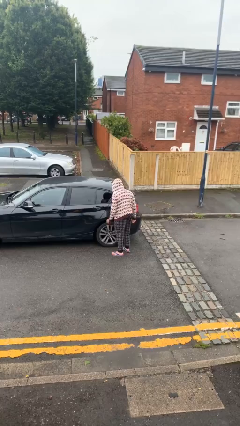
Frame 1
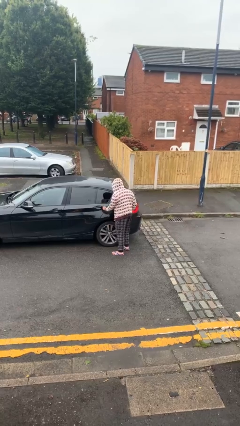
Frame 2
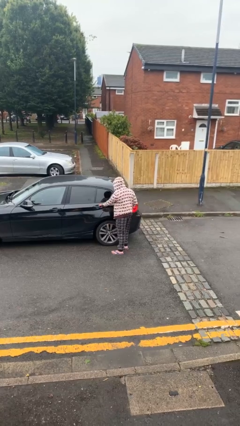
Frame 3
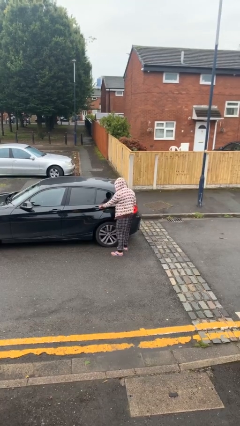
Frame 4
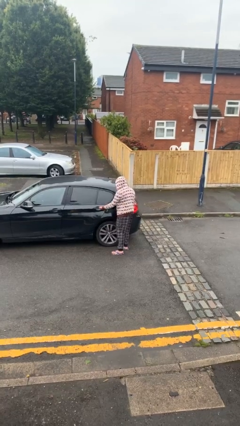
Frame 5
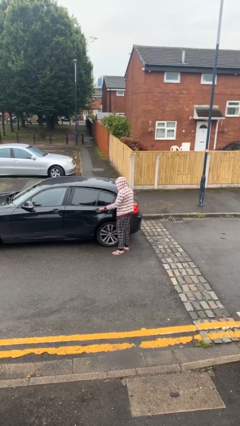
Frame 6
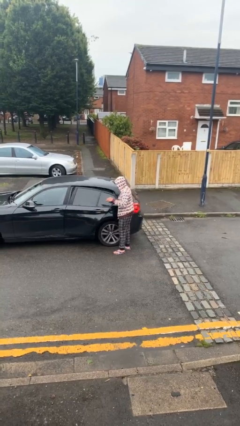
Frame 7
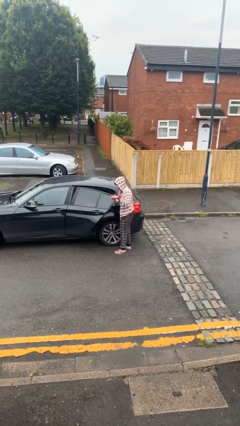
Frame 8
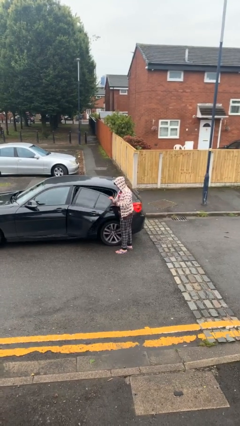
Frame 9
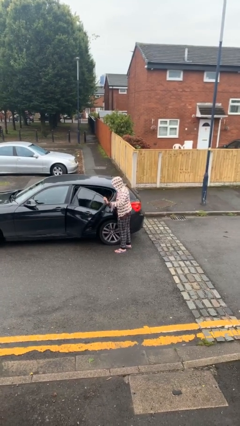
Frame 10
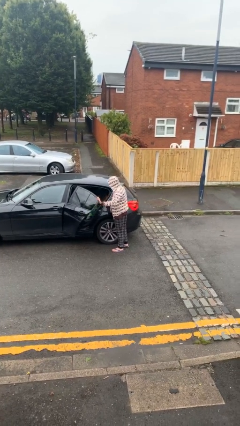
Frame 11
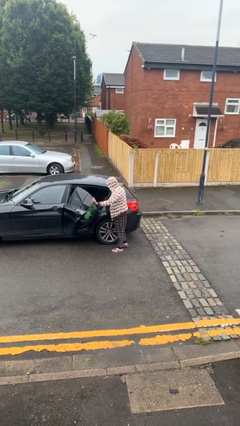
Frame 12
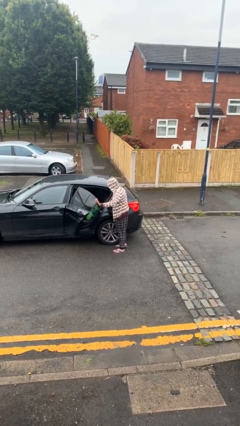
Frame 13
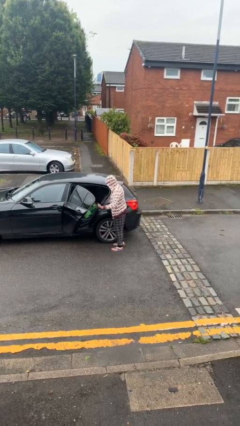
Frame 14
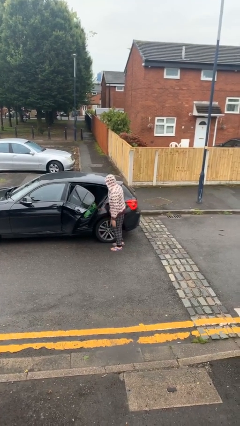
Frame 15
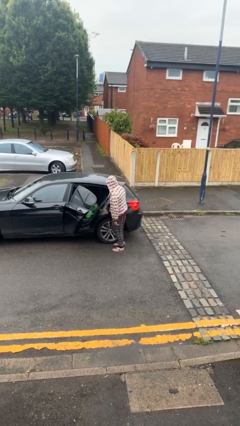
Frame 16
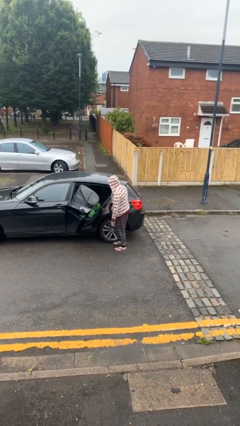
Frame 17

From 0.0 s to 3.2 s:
person opens car door

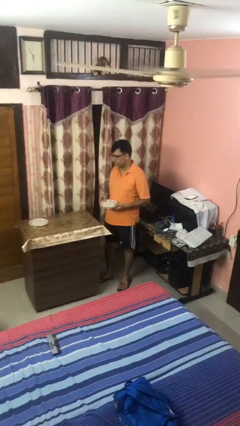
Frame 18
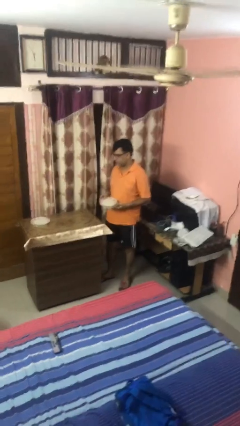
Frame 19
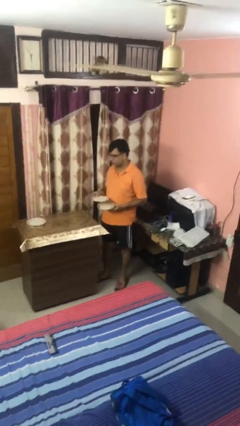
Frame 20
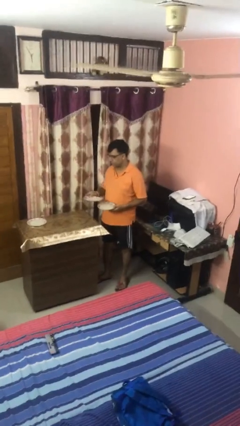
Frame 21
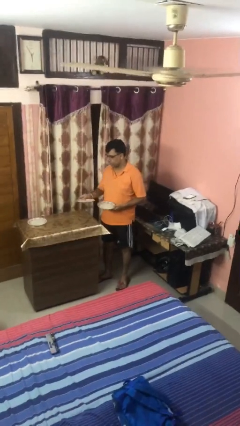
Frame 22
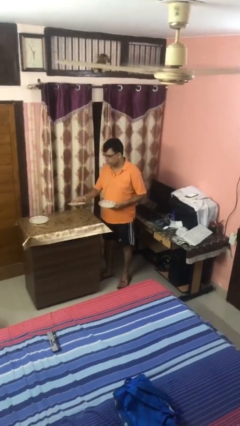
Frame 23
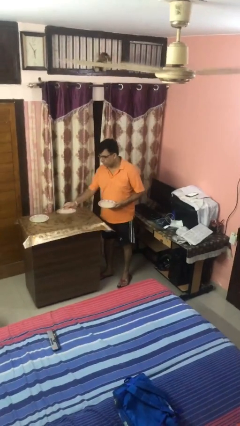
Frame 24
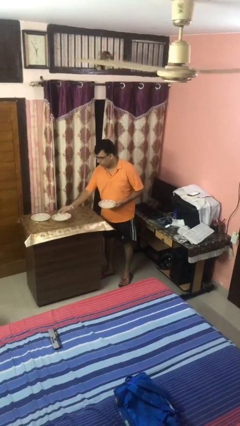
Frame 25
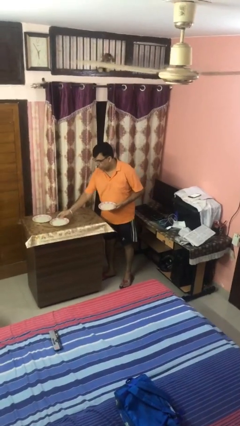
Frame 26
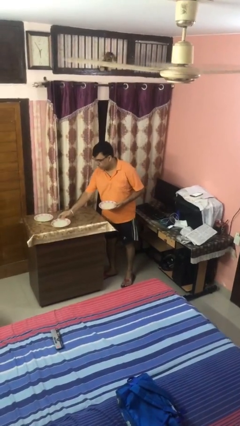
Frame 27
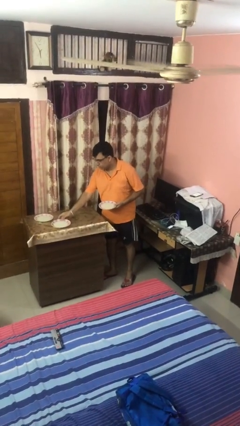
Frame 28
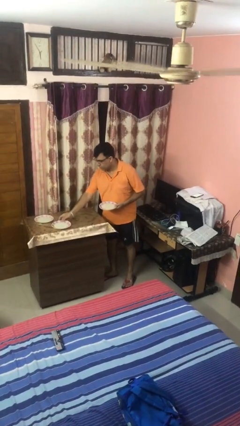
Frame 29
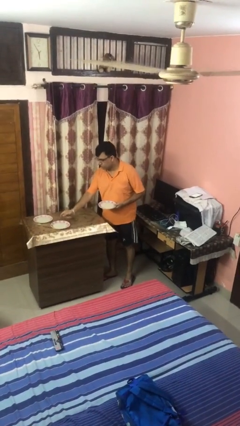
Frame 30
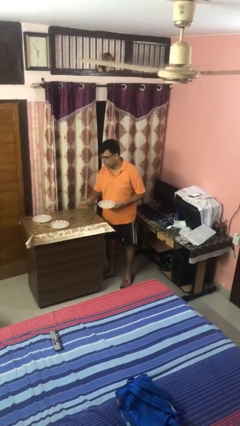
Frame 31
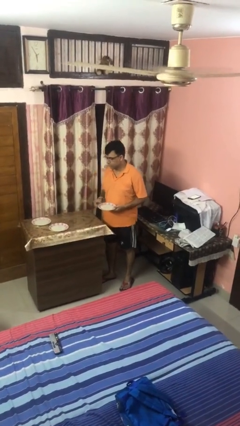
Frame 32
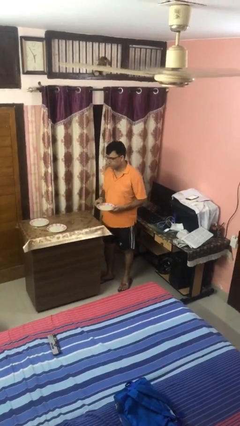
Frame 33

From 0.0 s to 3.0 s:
person sets table

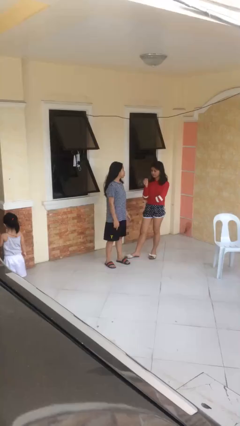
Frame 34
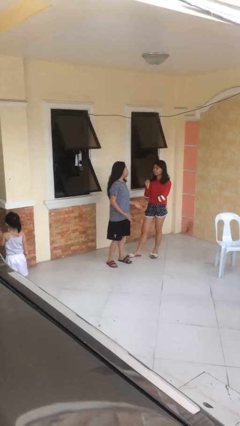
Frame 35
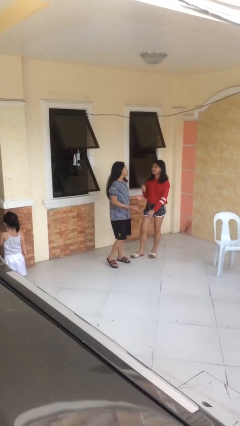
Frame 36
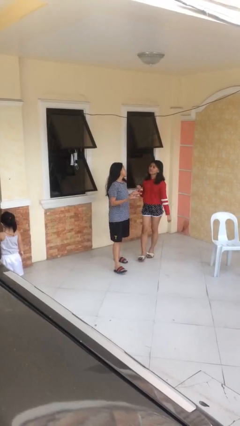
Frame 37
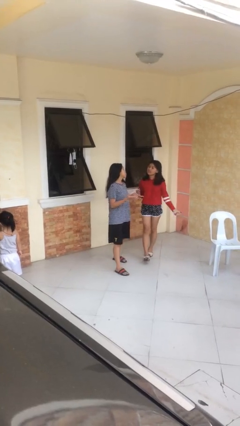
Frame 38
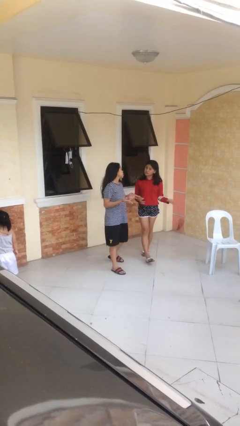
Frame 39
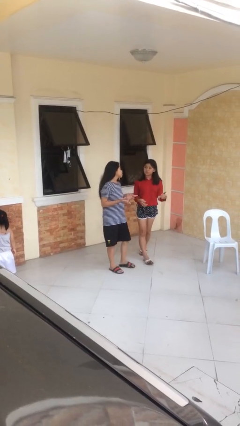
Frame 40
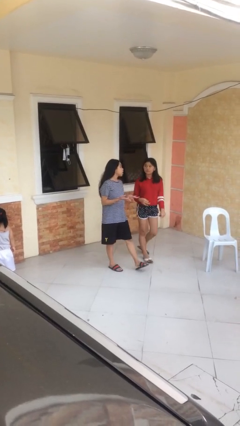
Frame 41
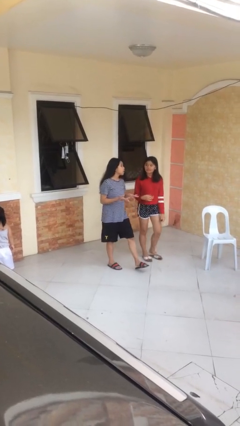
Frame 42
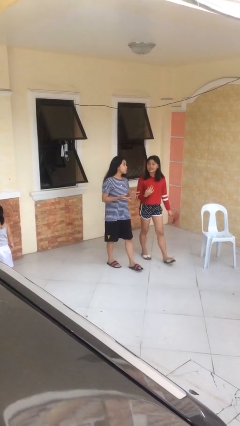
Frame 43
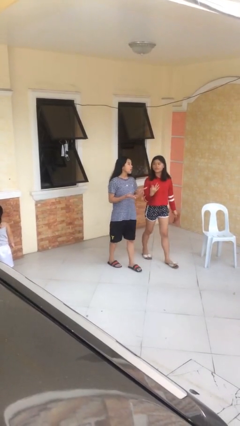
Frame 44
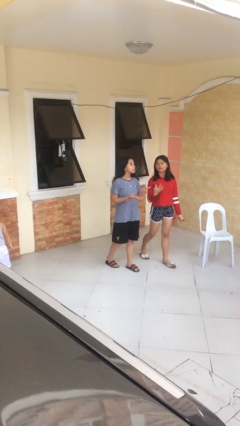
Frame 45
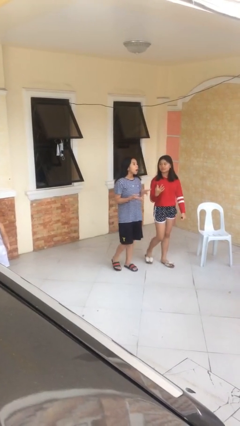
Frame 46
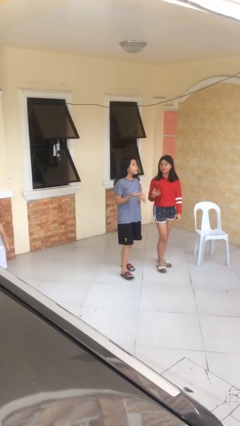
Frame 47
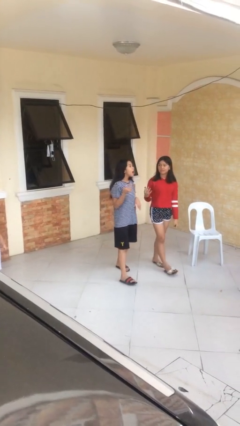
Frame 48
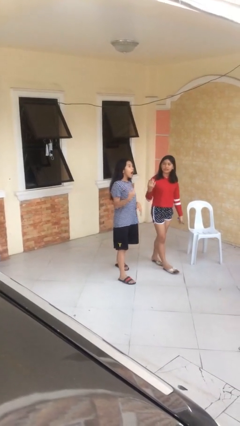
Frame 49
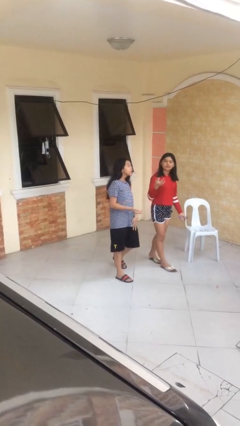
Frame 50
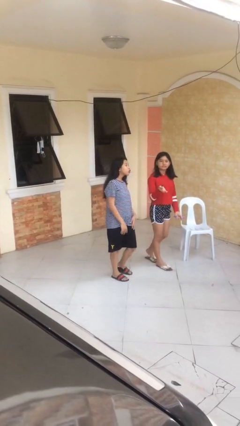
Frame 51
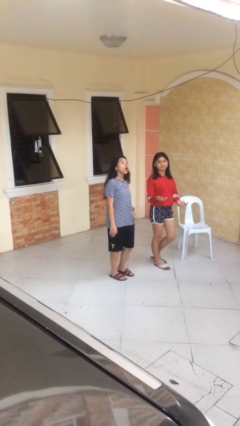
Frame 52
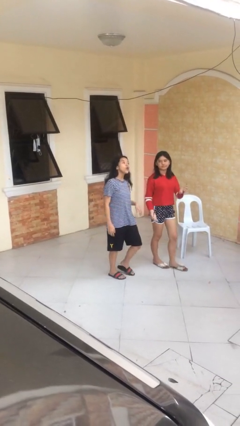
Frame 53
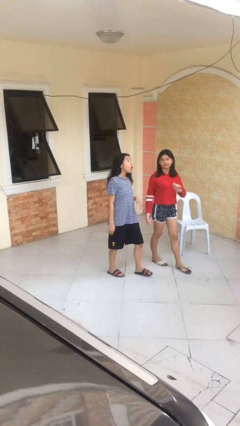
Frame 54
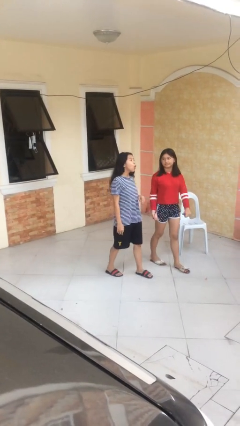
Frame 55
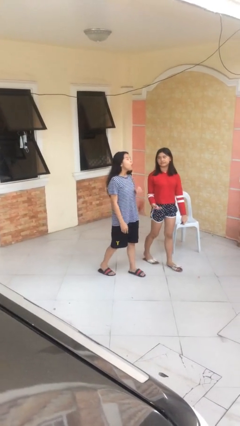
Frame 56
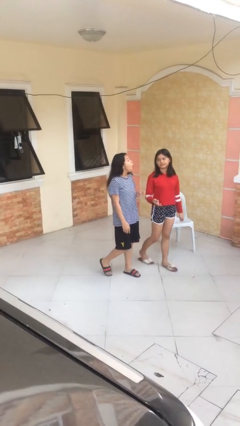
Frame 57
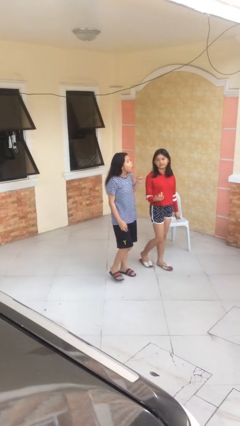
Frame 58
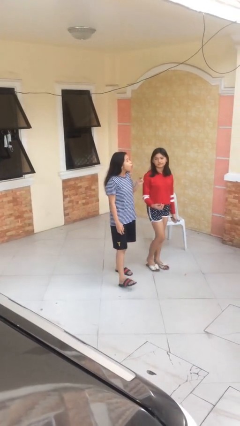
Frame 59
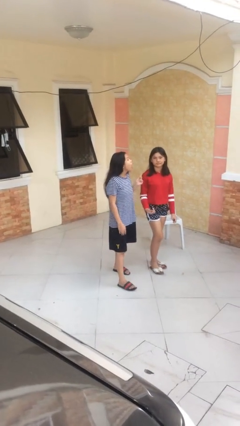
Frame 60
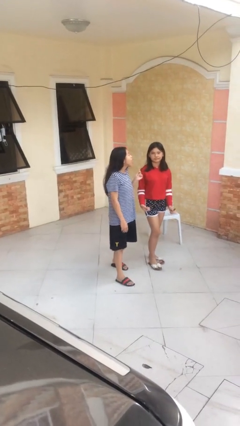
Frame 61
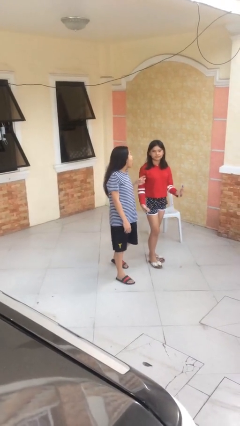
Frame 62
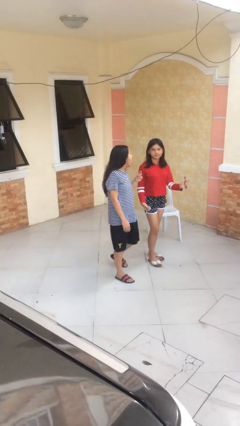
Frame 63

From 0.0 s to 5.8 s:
person talks to person

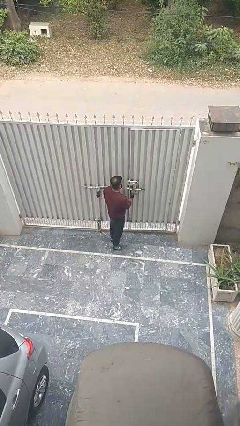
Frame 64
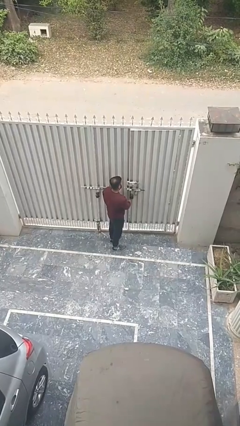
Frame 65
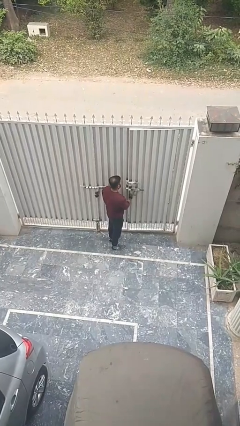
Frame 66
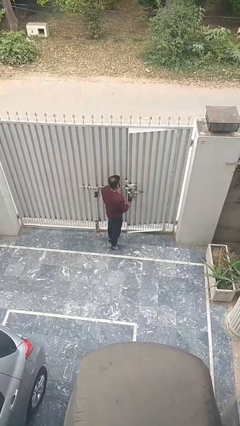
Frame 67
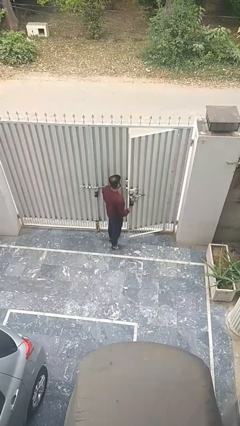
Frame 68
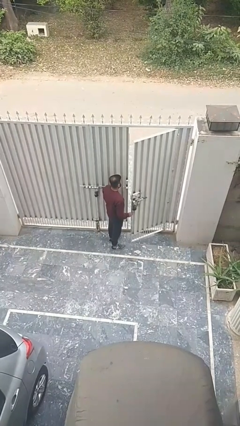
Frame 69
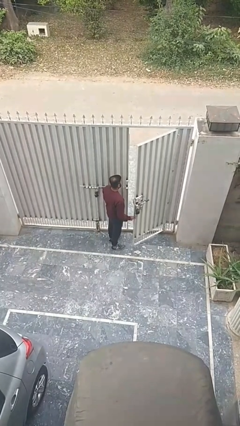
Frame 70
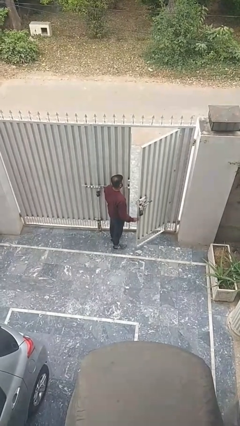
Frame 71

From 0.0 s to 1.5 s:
person opens facility door

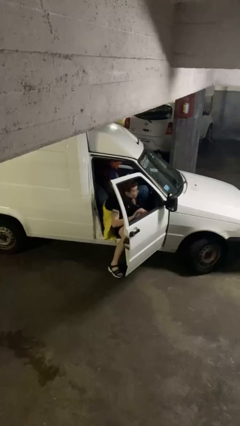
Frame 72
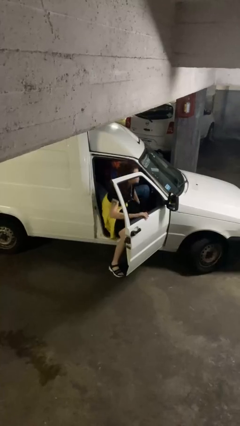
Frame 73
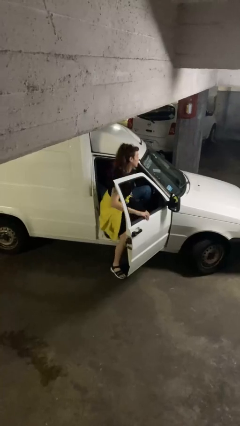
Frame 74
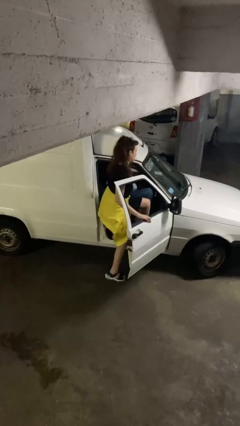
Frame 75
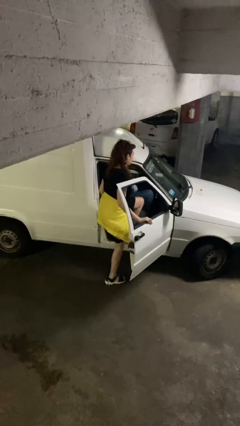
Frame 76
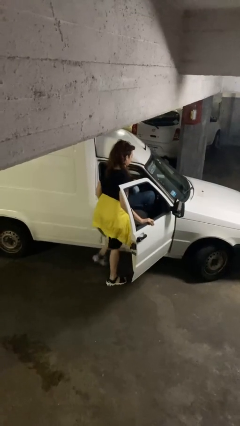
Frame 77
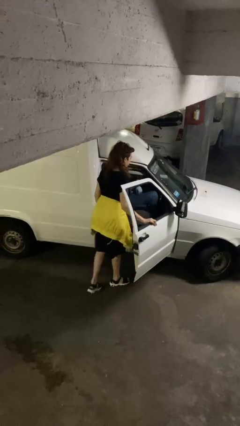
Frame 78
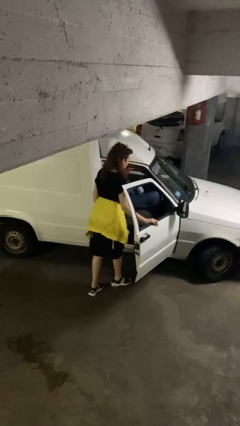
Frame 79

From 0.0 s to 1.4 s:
person exits car

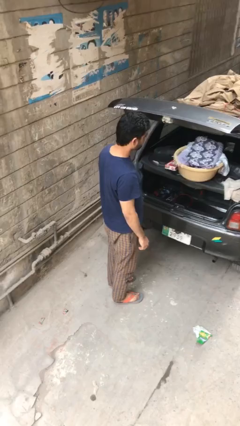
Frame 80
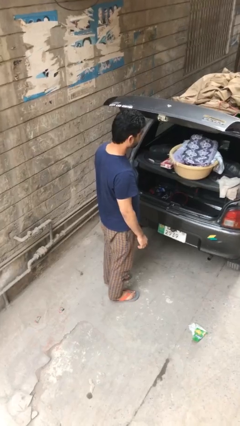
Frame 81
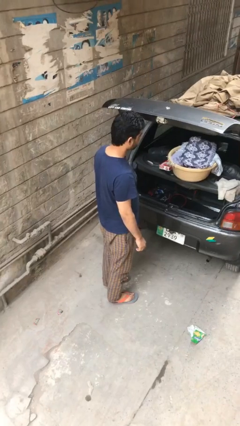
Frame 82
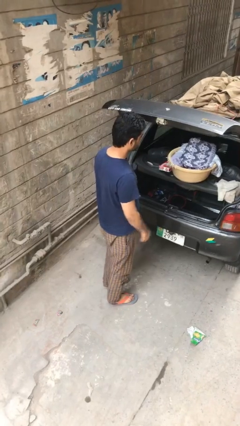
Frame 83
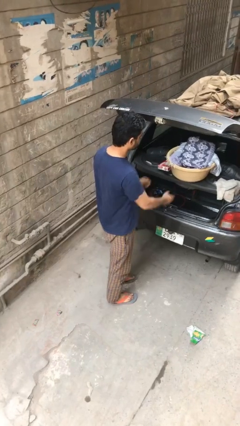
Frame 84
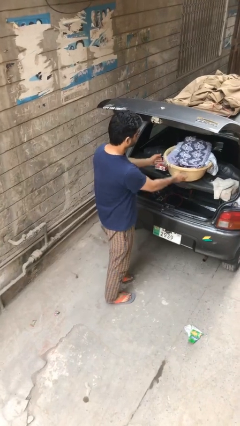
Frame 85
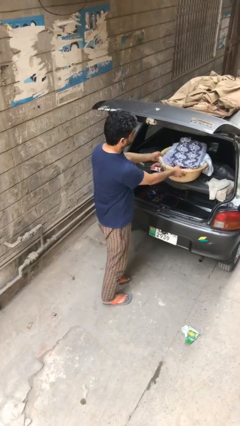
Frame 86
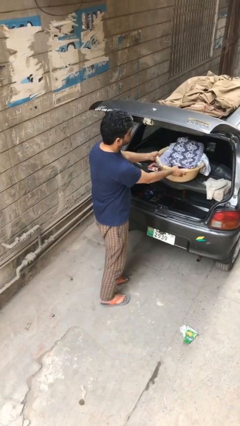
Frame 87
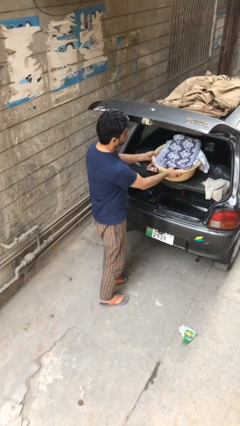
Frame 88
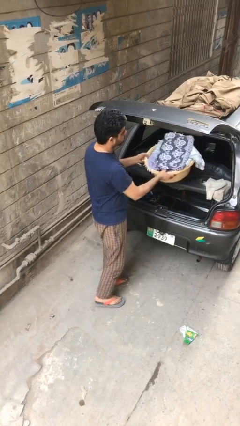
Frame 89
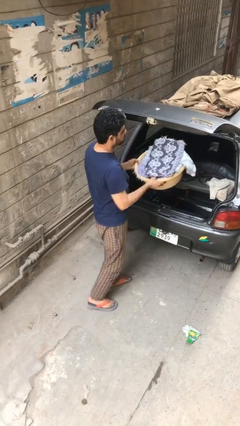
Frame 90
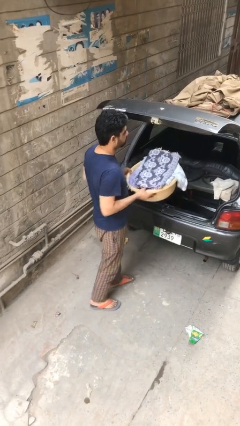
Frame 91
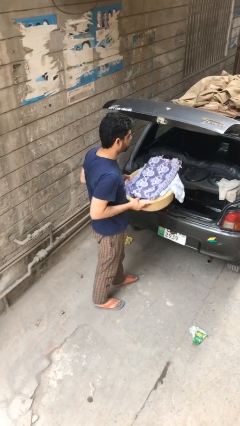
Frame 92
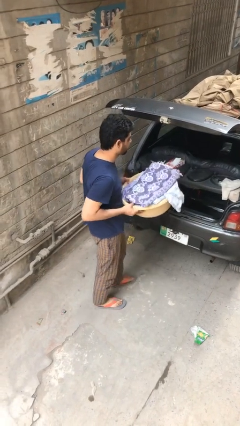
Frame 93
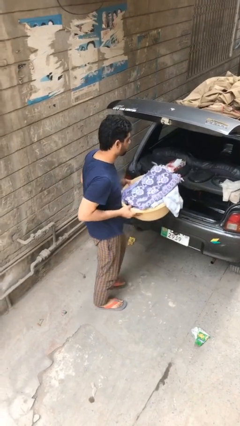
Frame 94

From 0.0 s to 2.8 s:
person unloads car
